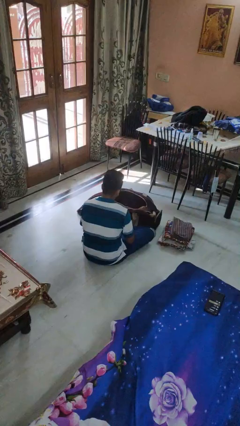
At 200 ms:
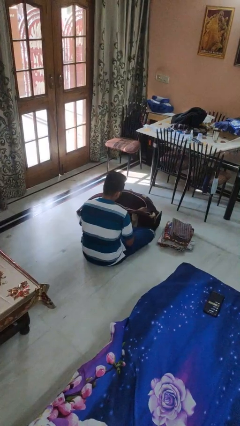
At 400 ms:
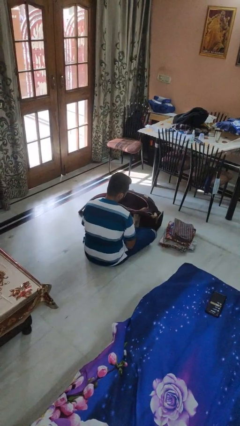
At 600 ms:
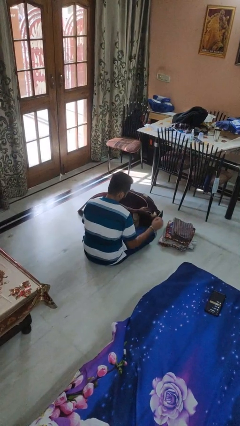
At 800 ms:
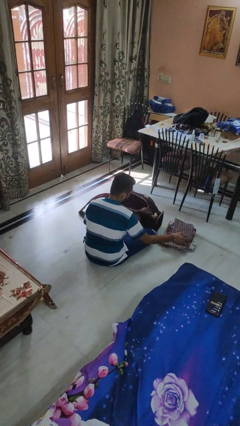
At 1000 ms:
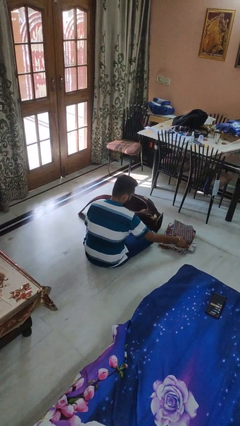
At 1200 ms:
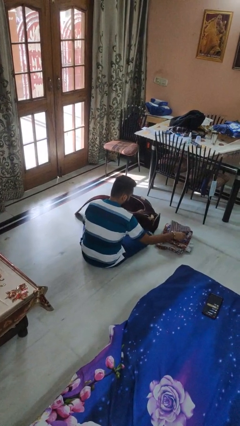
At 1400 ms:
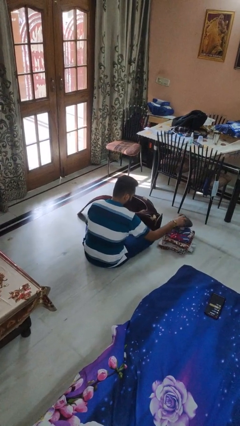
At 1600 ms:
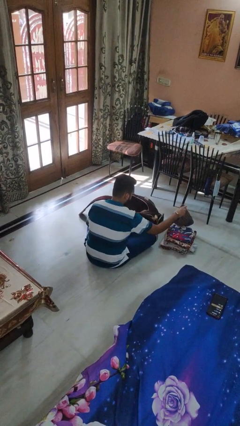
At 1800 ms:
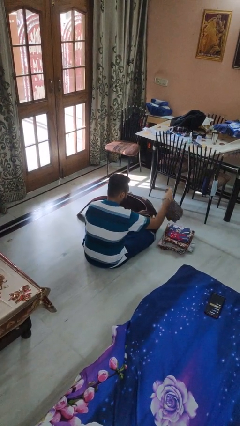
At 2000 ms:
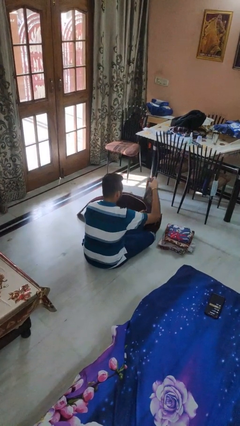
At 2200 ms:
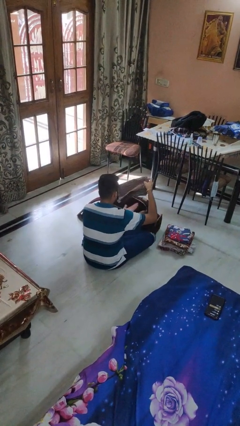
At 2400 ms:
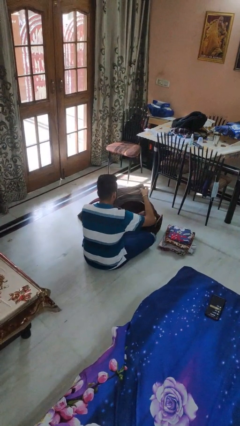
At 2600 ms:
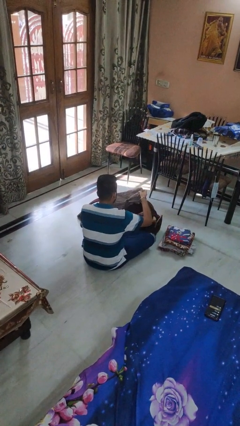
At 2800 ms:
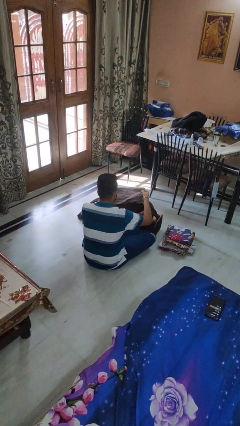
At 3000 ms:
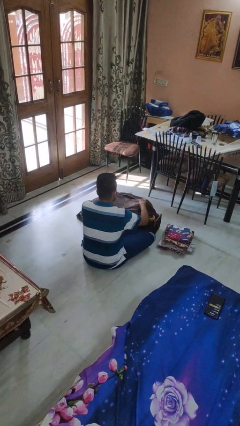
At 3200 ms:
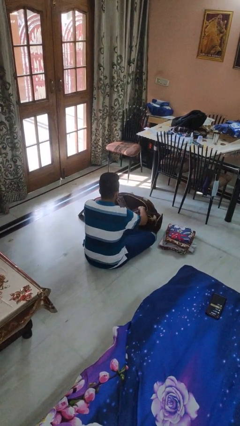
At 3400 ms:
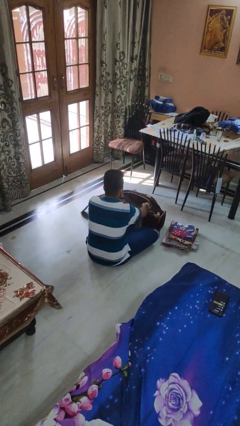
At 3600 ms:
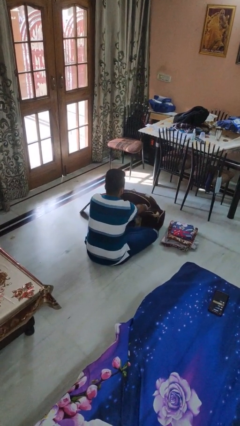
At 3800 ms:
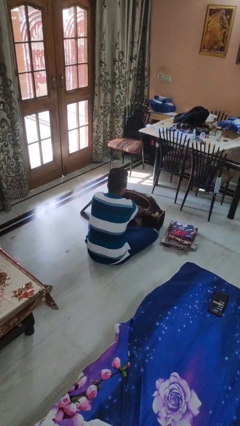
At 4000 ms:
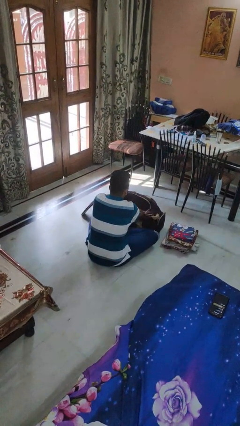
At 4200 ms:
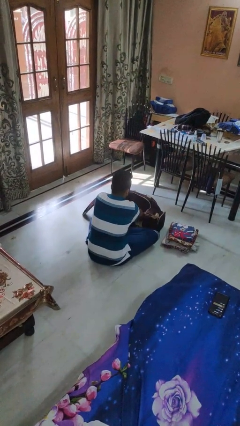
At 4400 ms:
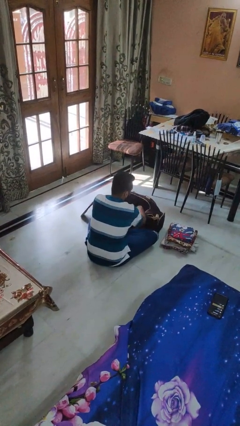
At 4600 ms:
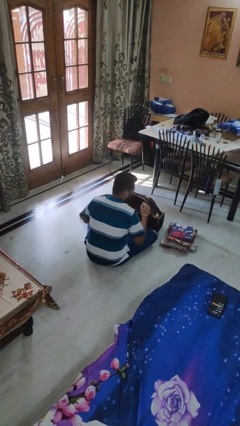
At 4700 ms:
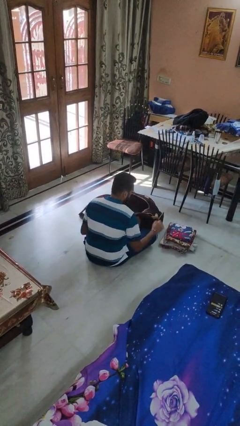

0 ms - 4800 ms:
person loads clothes into suitcase

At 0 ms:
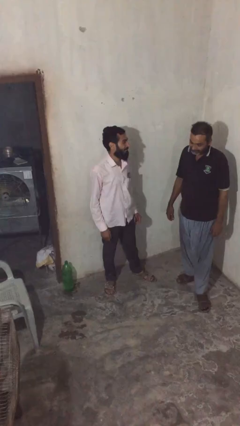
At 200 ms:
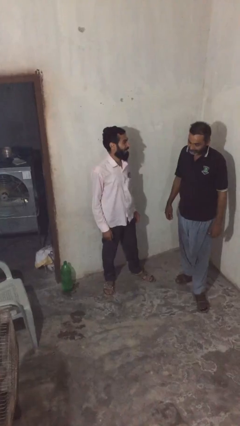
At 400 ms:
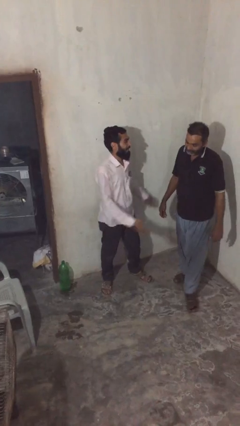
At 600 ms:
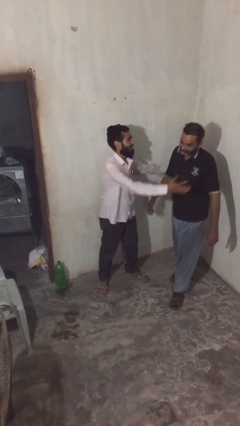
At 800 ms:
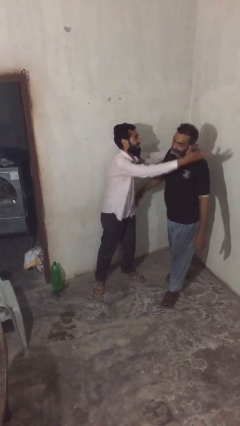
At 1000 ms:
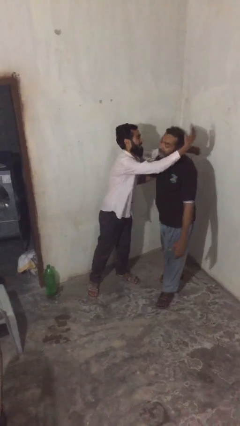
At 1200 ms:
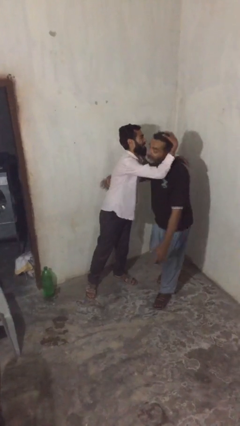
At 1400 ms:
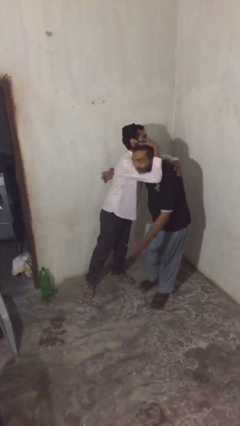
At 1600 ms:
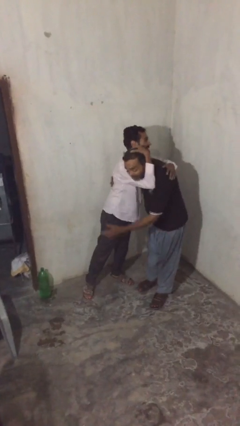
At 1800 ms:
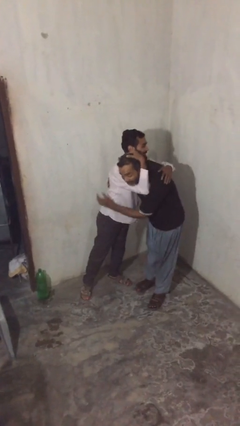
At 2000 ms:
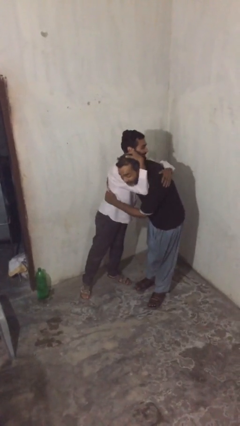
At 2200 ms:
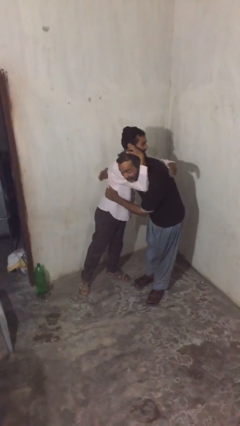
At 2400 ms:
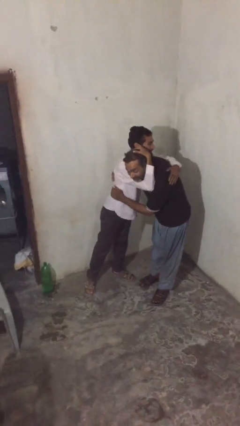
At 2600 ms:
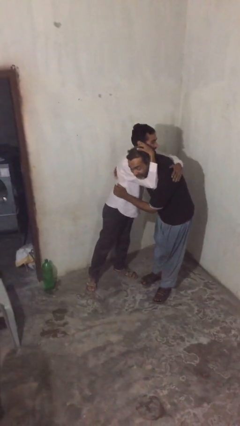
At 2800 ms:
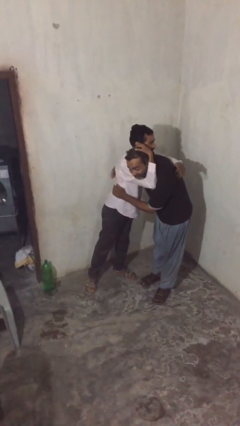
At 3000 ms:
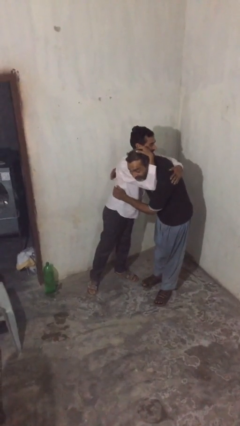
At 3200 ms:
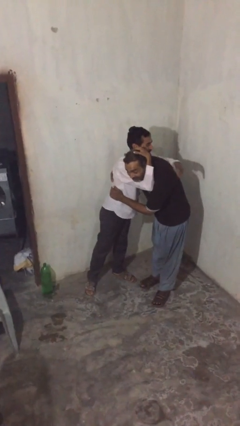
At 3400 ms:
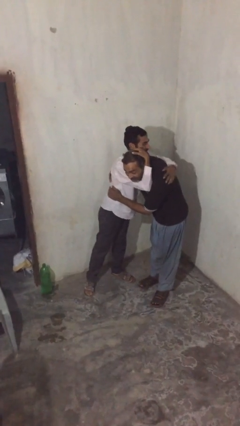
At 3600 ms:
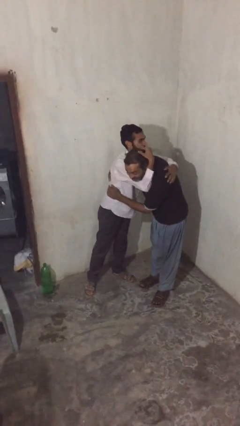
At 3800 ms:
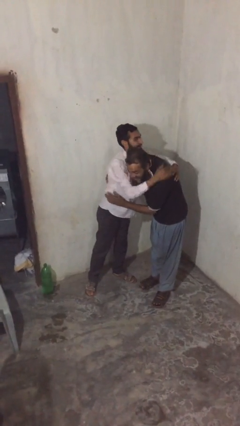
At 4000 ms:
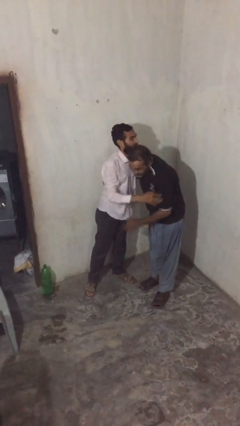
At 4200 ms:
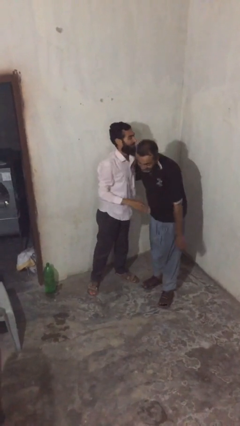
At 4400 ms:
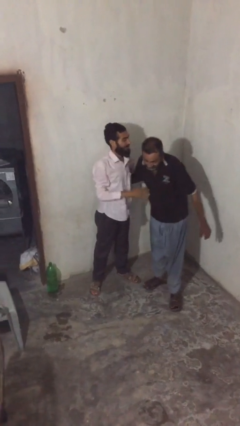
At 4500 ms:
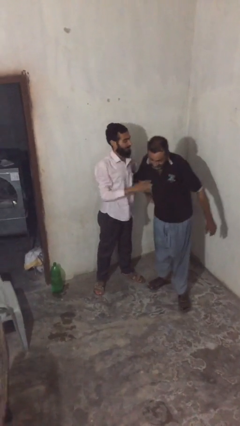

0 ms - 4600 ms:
person embraces person

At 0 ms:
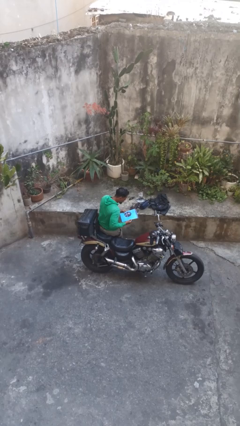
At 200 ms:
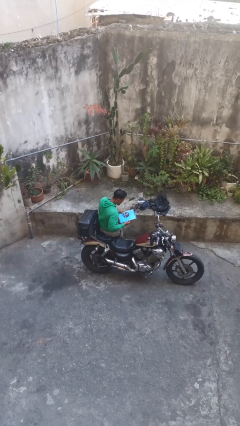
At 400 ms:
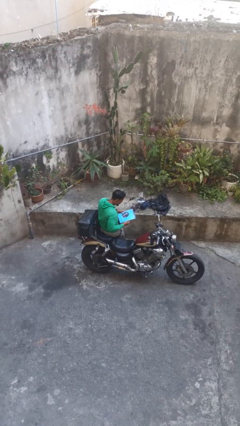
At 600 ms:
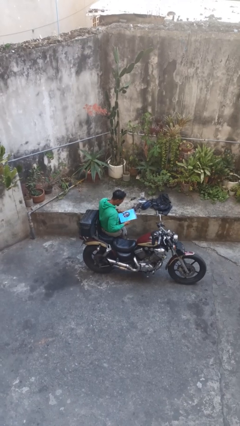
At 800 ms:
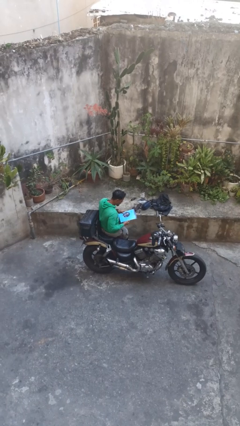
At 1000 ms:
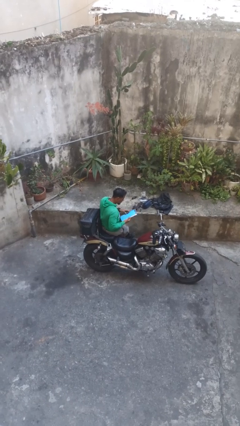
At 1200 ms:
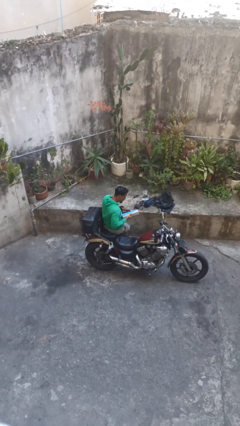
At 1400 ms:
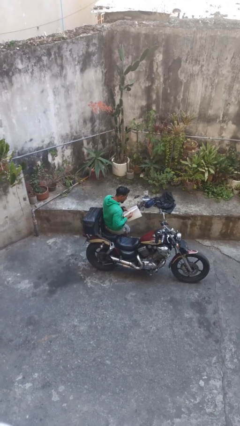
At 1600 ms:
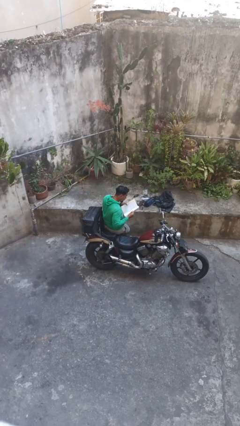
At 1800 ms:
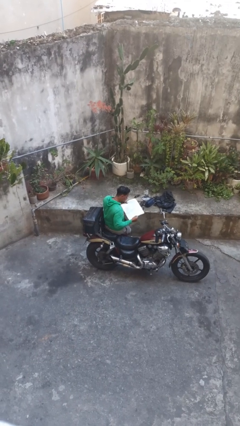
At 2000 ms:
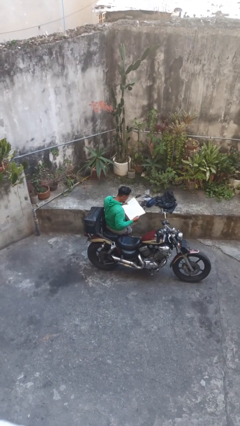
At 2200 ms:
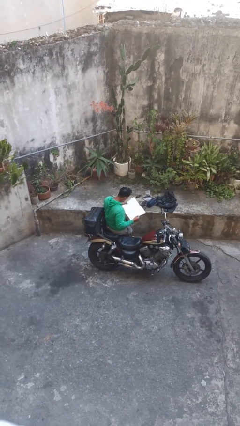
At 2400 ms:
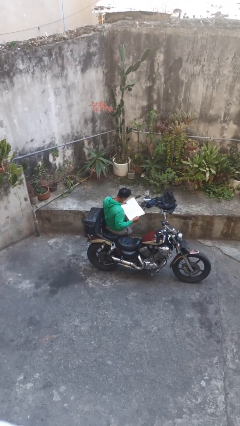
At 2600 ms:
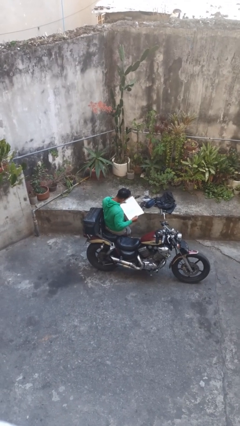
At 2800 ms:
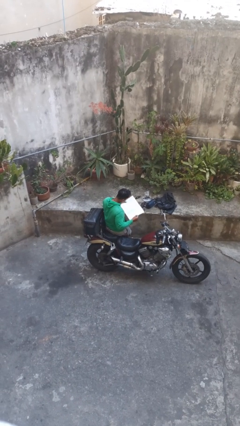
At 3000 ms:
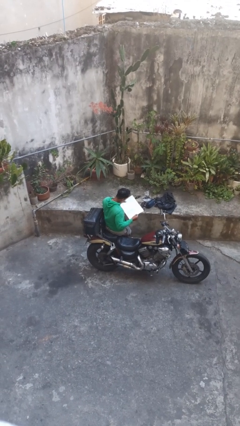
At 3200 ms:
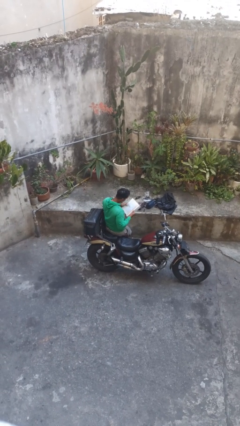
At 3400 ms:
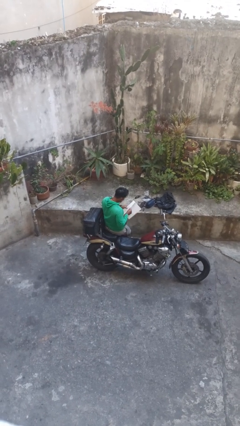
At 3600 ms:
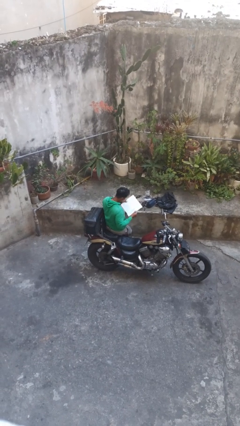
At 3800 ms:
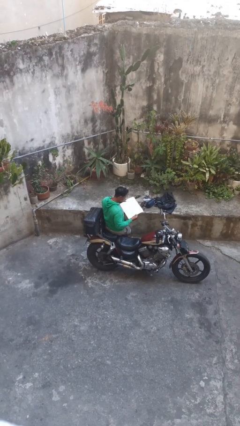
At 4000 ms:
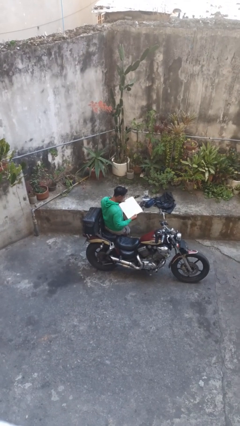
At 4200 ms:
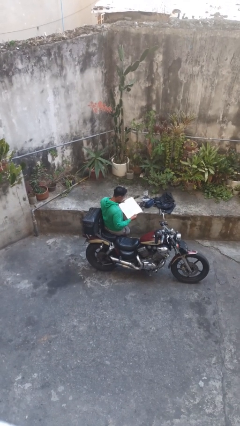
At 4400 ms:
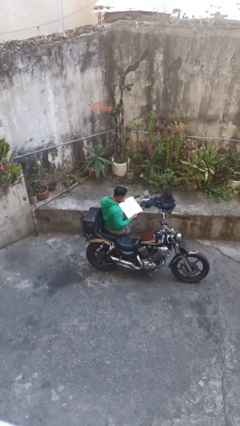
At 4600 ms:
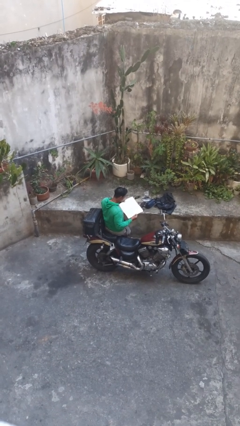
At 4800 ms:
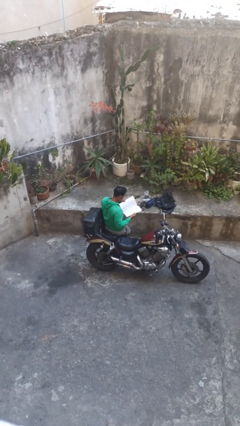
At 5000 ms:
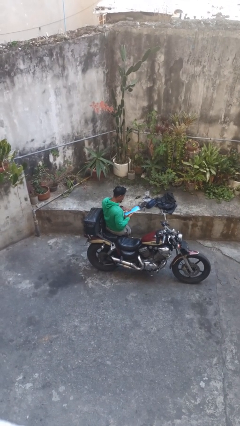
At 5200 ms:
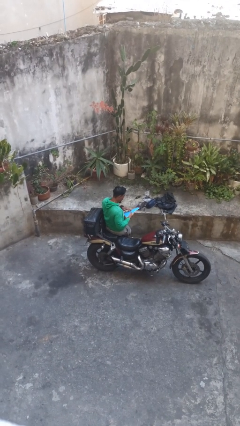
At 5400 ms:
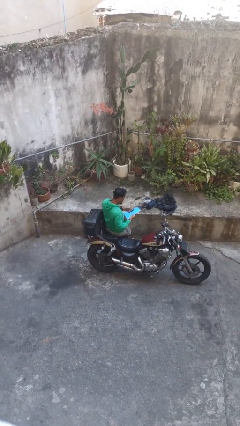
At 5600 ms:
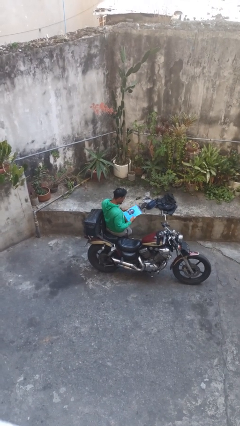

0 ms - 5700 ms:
person reads document

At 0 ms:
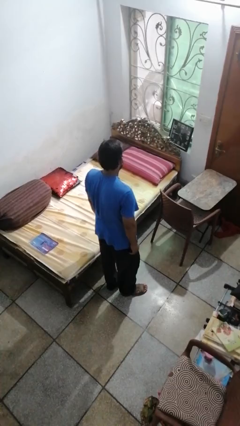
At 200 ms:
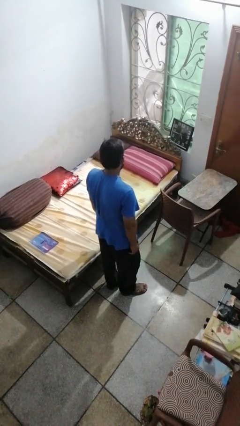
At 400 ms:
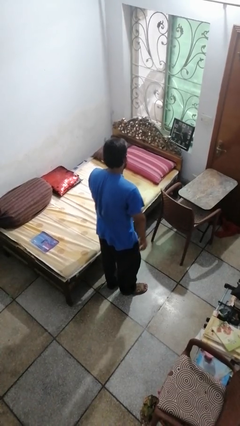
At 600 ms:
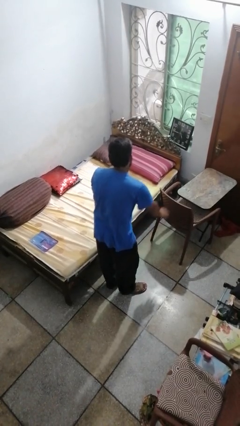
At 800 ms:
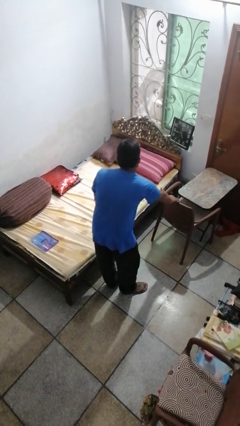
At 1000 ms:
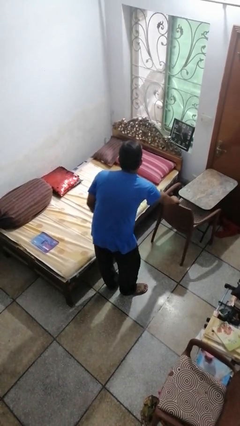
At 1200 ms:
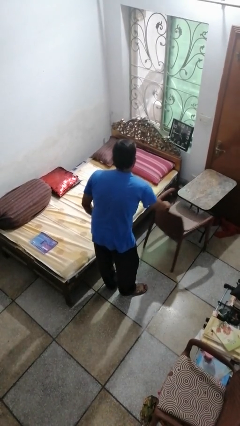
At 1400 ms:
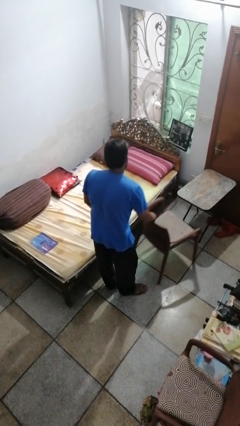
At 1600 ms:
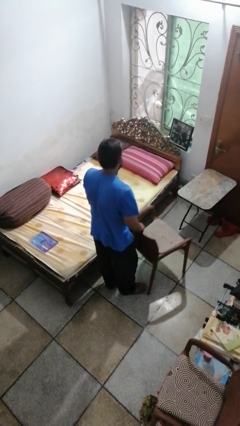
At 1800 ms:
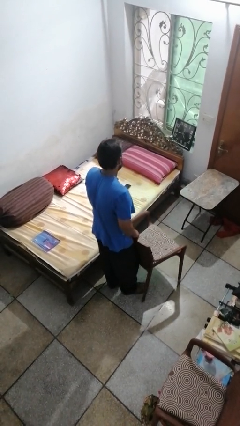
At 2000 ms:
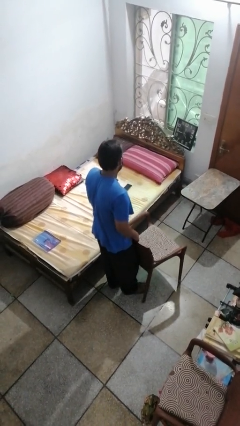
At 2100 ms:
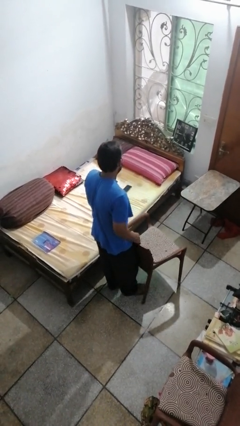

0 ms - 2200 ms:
person pulls out chair

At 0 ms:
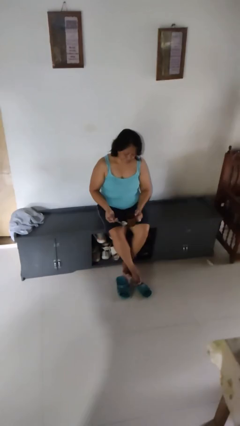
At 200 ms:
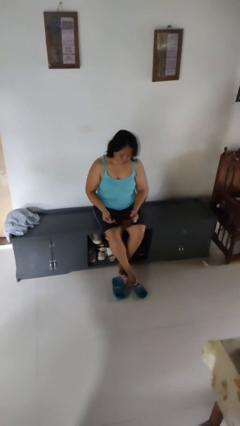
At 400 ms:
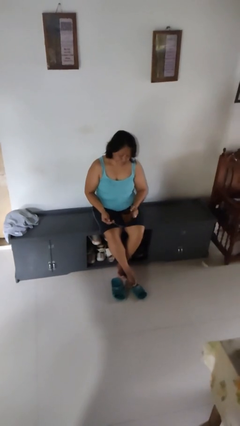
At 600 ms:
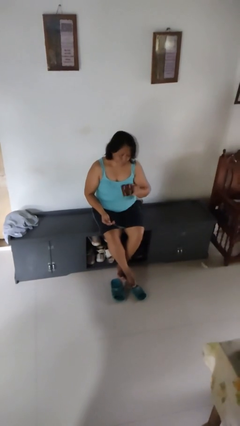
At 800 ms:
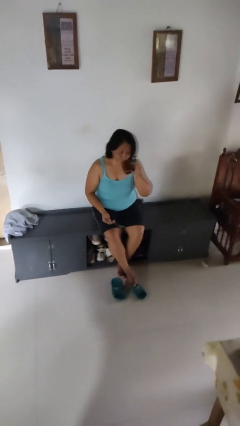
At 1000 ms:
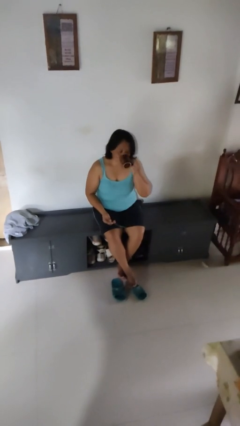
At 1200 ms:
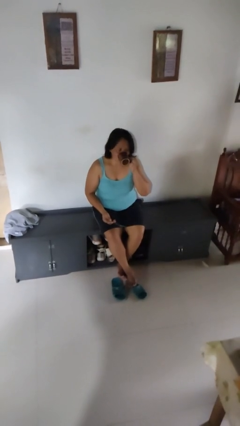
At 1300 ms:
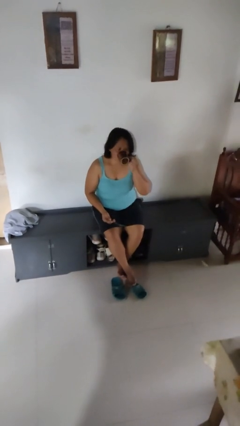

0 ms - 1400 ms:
person drinks from mug